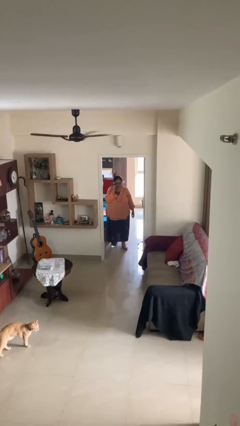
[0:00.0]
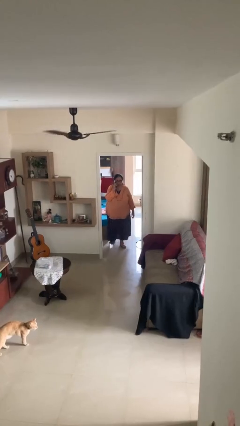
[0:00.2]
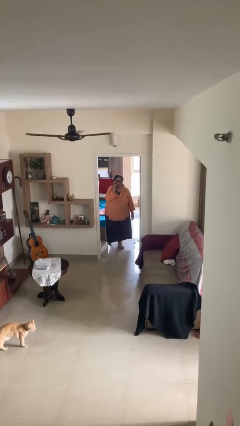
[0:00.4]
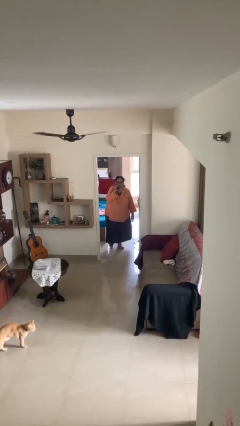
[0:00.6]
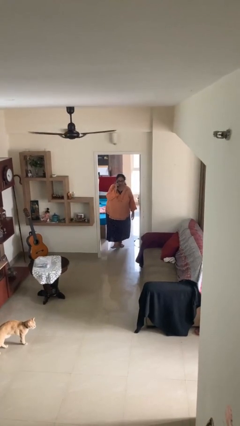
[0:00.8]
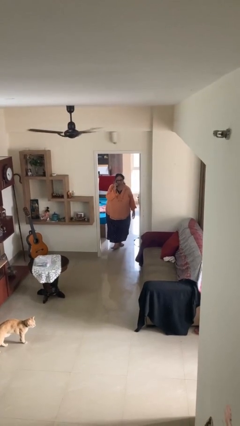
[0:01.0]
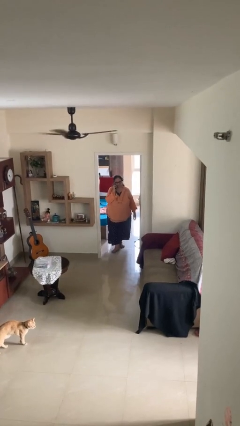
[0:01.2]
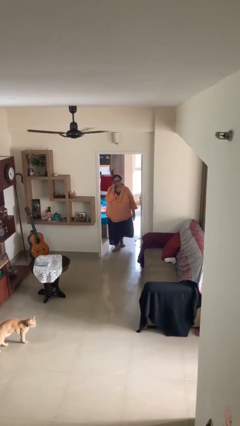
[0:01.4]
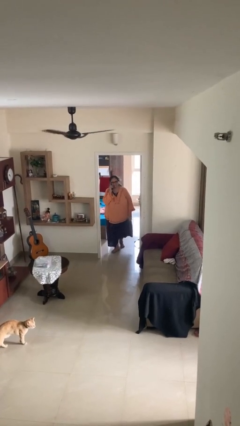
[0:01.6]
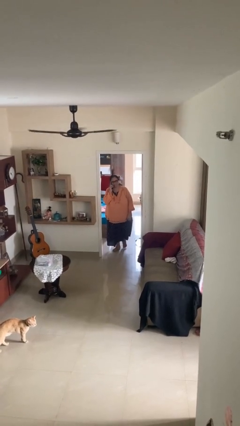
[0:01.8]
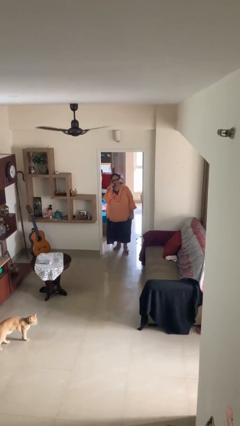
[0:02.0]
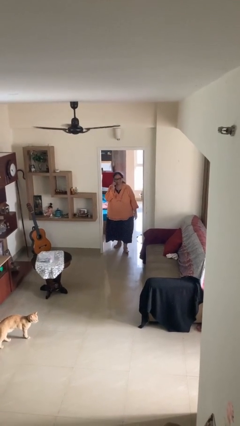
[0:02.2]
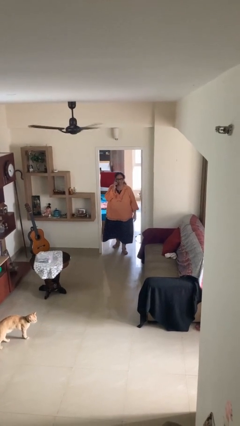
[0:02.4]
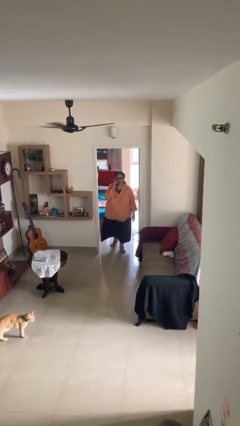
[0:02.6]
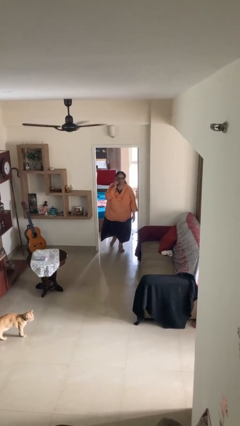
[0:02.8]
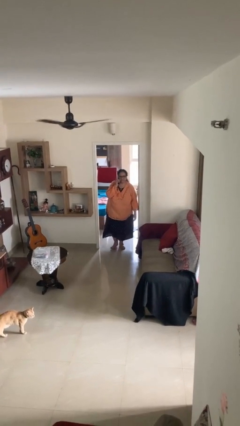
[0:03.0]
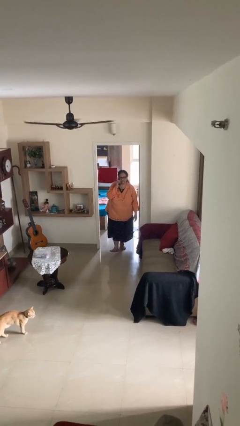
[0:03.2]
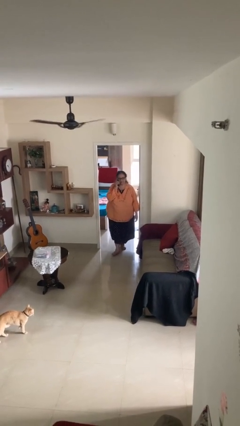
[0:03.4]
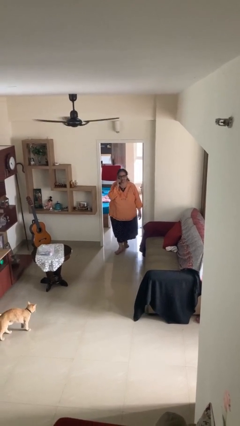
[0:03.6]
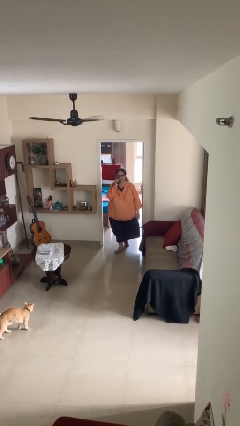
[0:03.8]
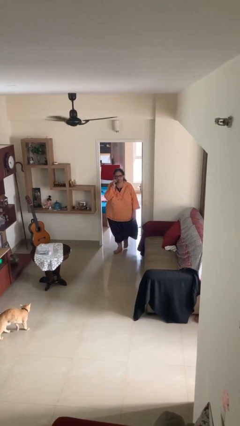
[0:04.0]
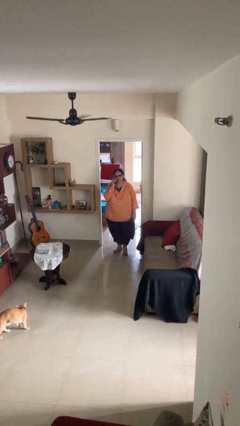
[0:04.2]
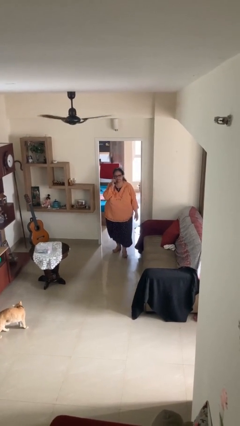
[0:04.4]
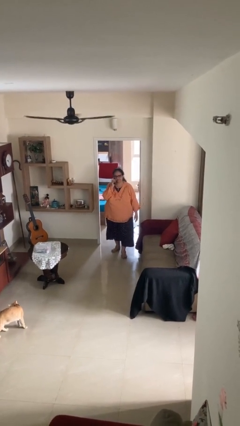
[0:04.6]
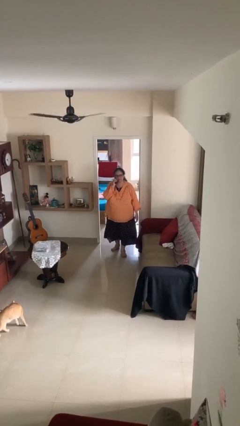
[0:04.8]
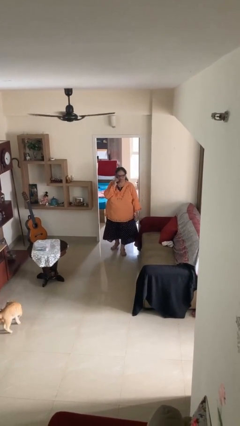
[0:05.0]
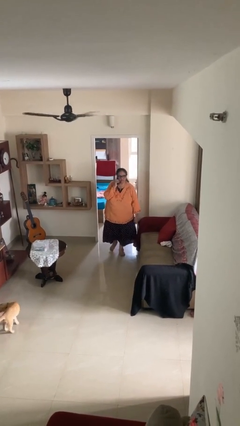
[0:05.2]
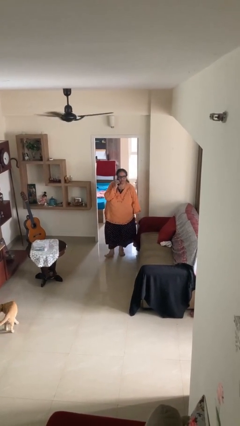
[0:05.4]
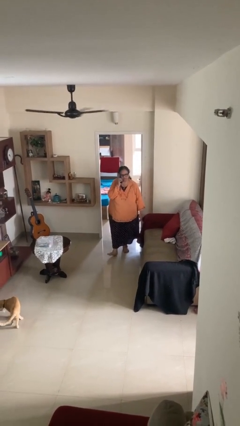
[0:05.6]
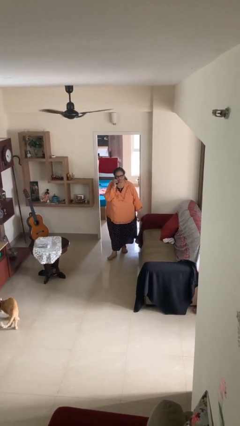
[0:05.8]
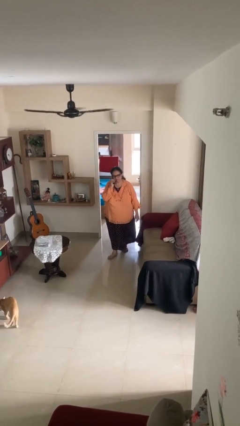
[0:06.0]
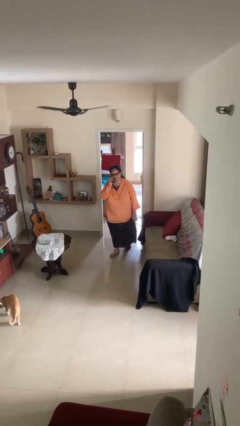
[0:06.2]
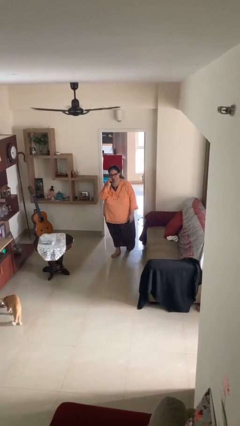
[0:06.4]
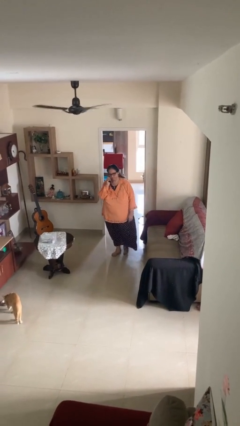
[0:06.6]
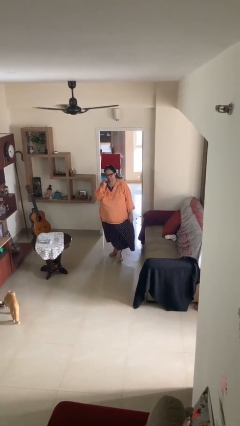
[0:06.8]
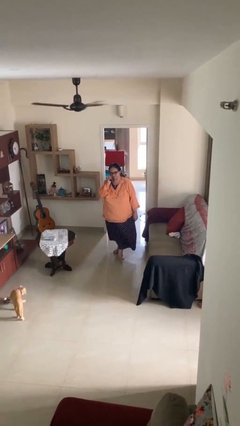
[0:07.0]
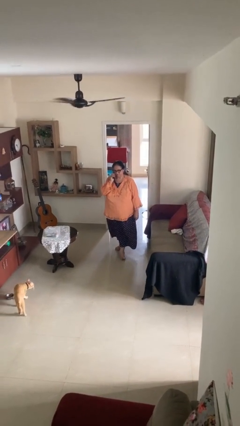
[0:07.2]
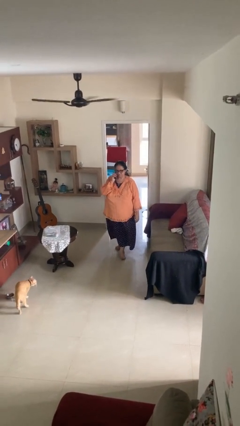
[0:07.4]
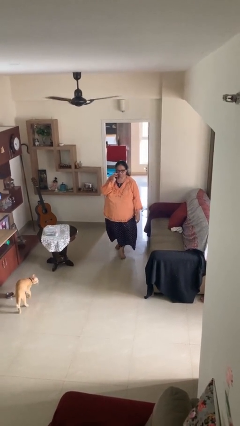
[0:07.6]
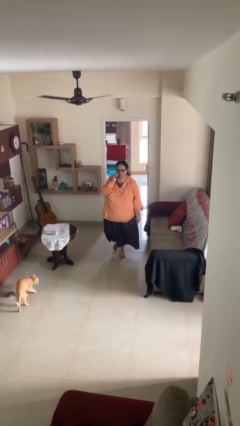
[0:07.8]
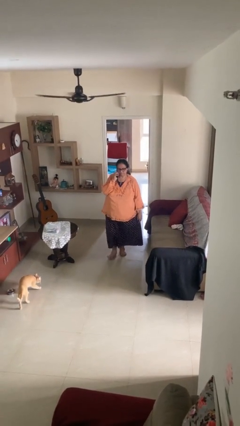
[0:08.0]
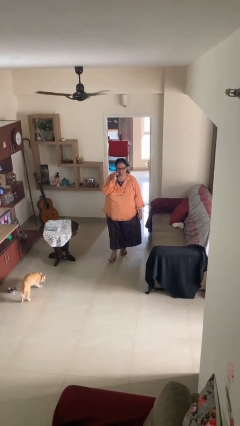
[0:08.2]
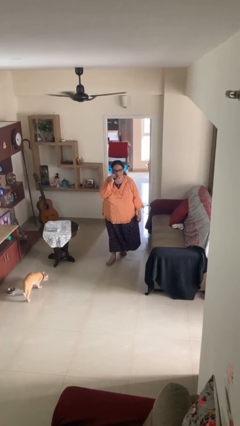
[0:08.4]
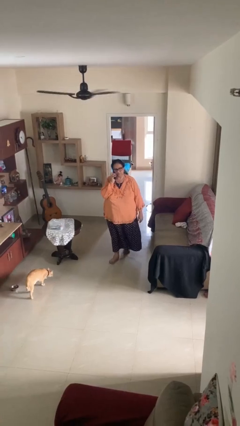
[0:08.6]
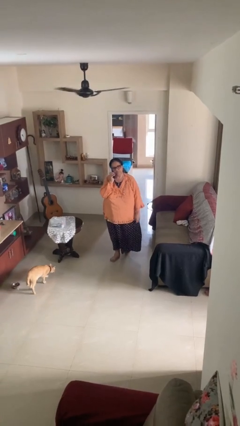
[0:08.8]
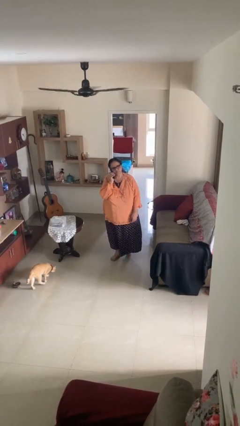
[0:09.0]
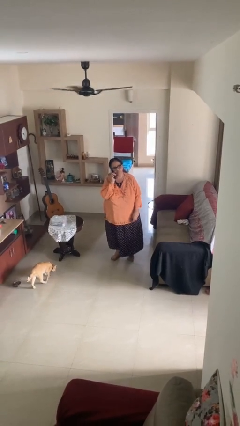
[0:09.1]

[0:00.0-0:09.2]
person enters scene through structure

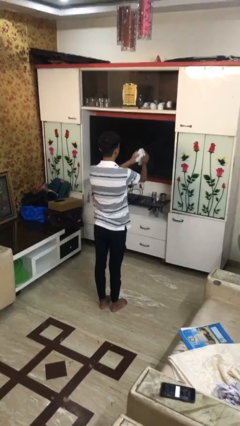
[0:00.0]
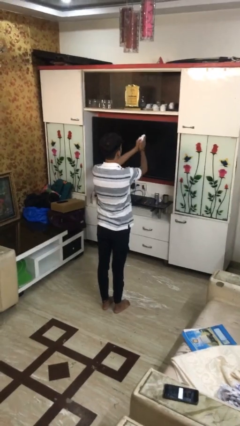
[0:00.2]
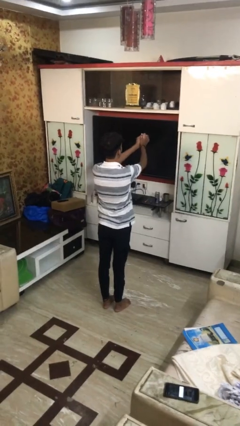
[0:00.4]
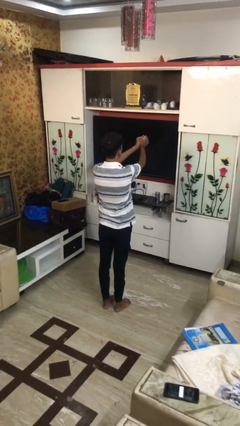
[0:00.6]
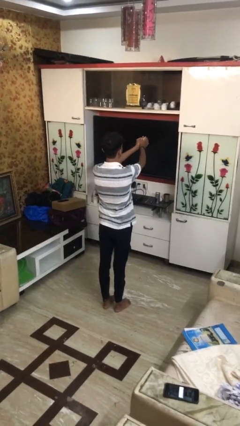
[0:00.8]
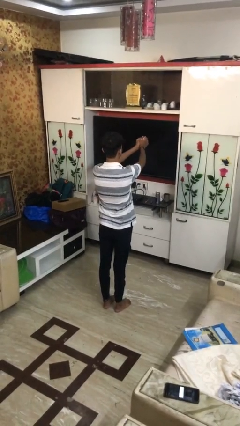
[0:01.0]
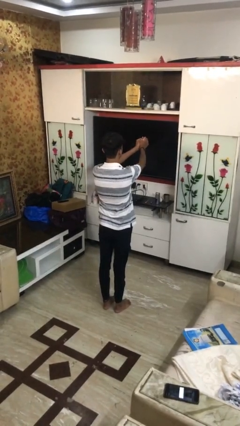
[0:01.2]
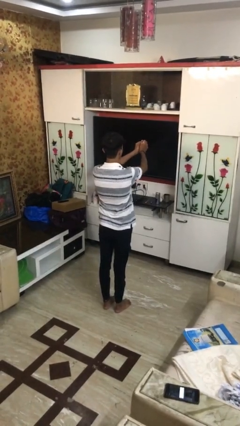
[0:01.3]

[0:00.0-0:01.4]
person crumples paper

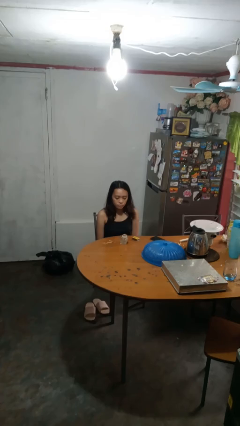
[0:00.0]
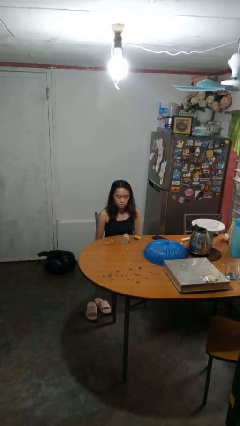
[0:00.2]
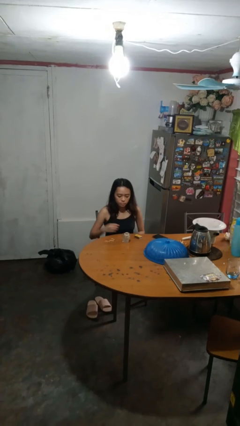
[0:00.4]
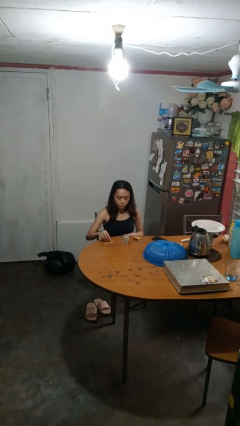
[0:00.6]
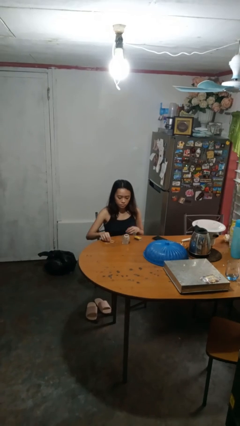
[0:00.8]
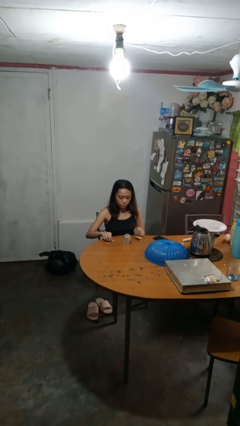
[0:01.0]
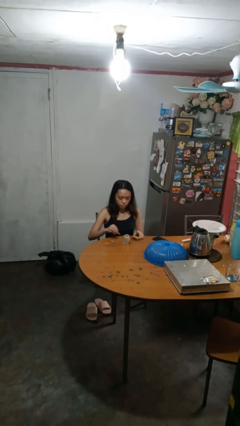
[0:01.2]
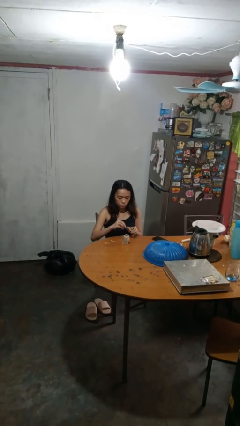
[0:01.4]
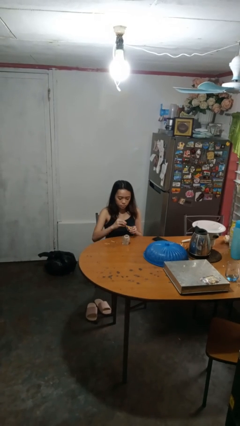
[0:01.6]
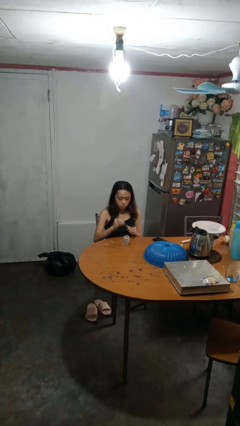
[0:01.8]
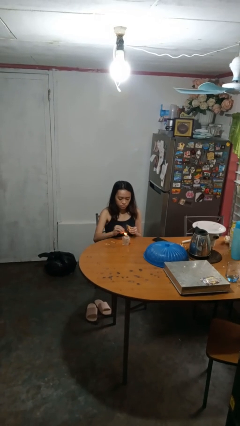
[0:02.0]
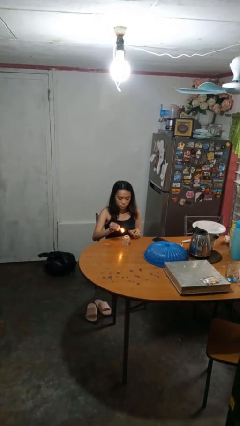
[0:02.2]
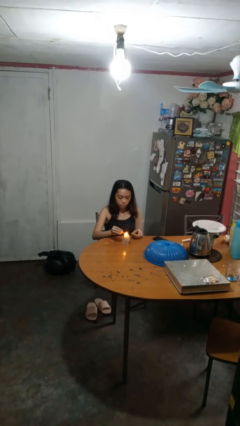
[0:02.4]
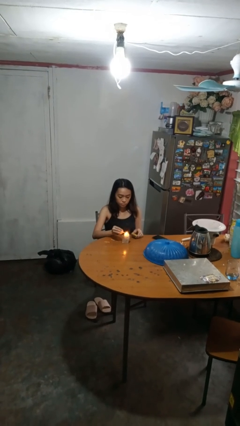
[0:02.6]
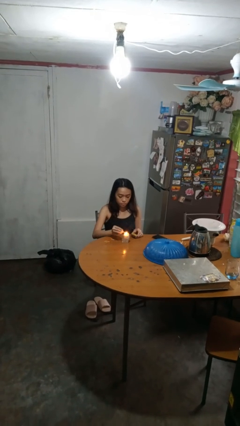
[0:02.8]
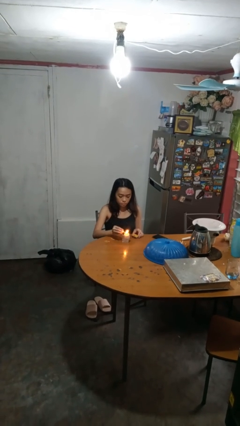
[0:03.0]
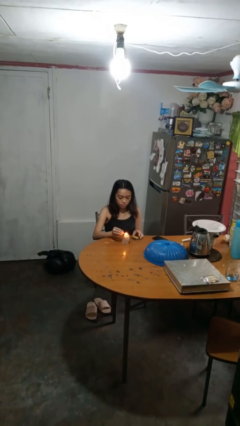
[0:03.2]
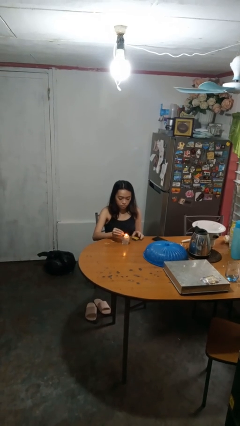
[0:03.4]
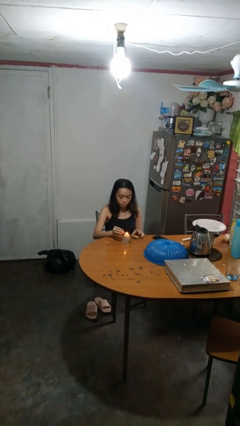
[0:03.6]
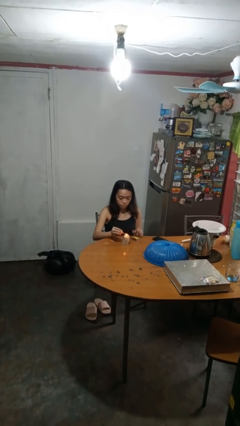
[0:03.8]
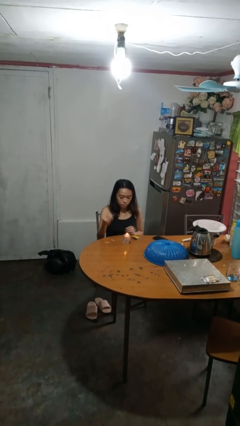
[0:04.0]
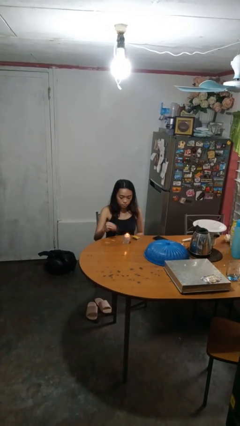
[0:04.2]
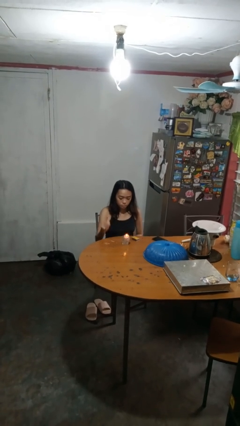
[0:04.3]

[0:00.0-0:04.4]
person lights candle

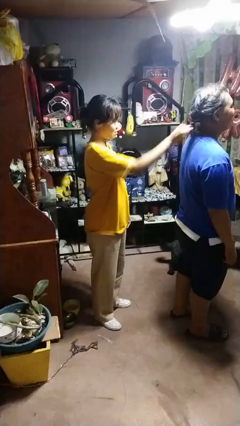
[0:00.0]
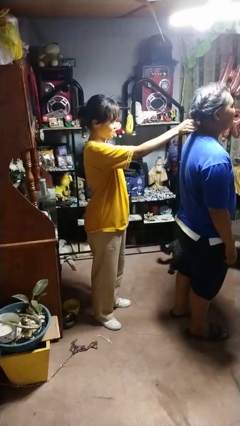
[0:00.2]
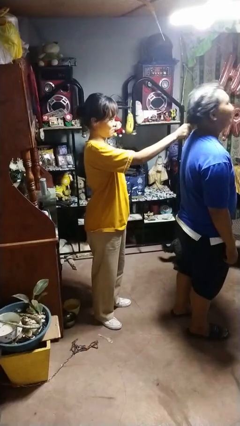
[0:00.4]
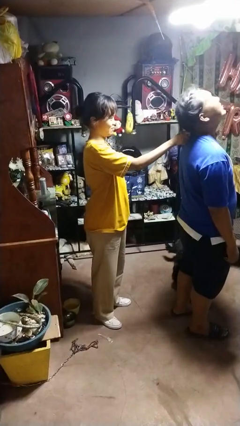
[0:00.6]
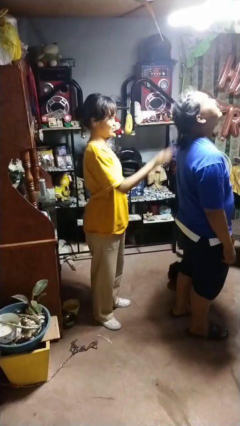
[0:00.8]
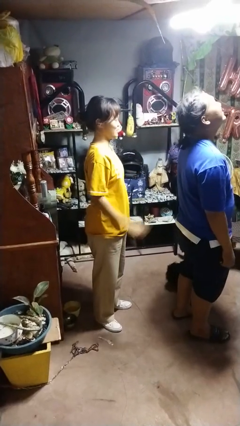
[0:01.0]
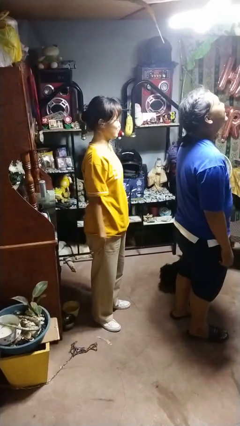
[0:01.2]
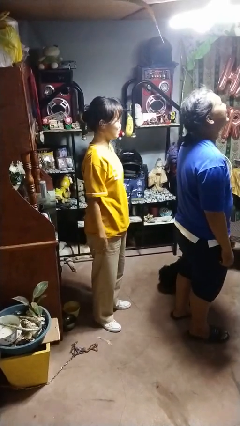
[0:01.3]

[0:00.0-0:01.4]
person grabs person by hair

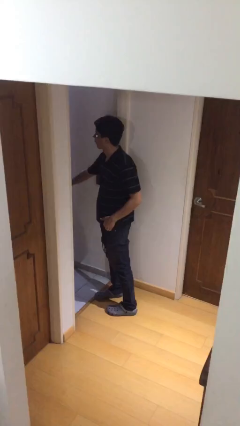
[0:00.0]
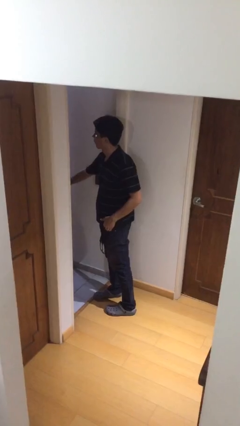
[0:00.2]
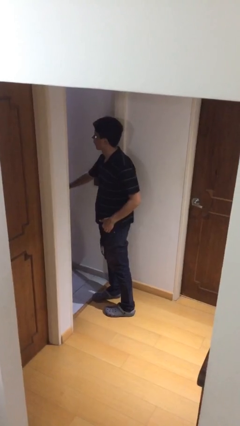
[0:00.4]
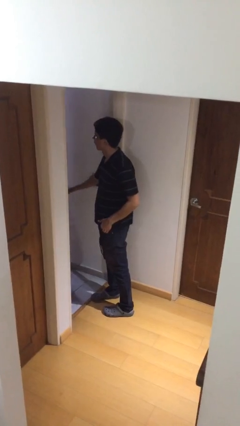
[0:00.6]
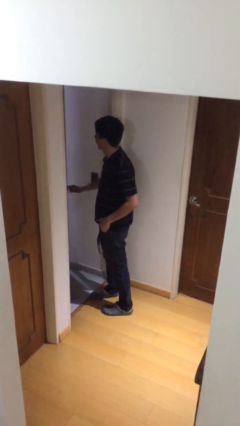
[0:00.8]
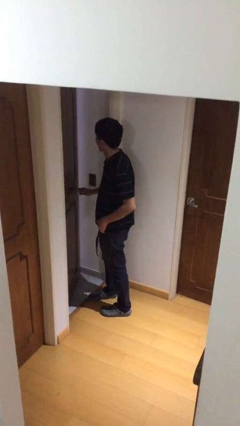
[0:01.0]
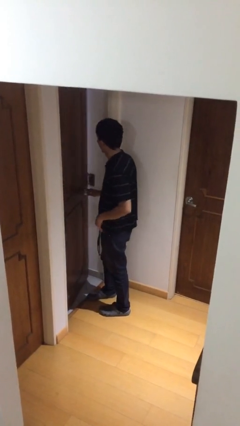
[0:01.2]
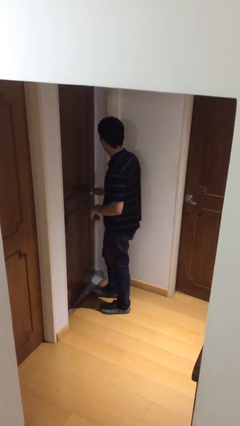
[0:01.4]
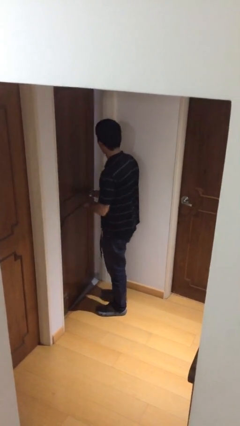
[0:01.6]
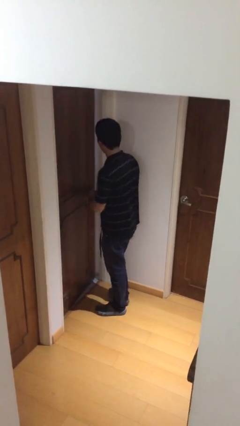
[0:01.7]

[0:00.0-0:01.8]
person closes facility door
